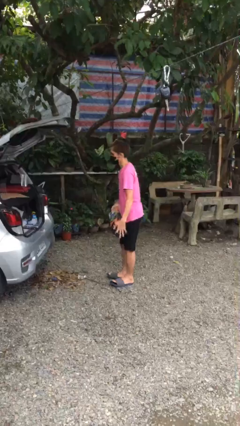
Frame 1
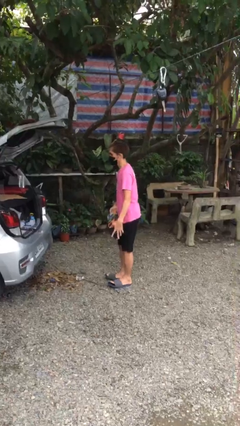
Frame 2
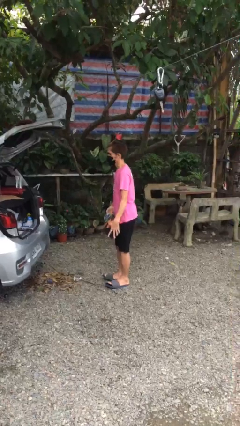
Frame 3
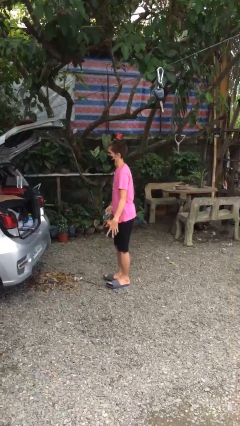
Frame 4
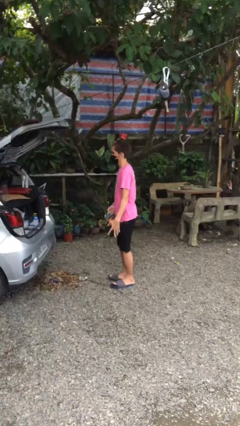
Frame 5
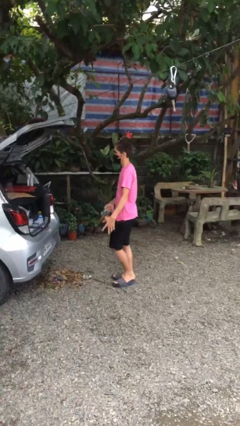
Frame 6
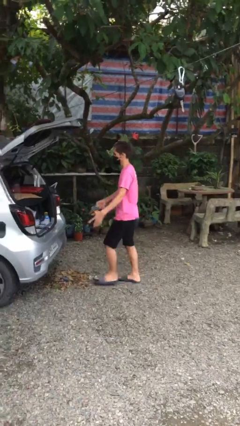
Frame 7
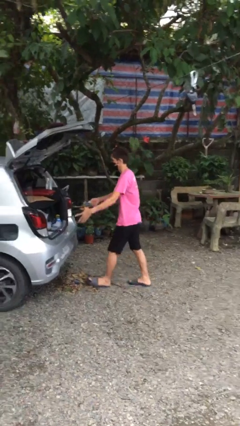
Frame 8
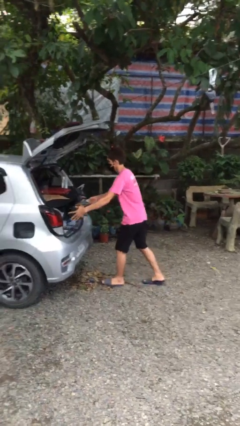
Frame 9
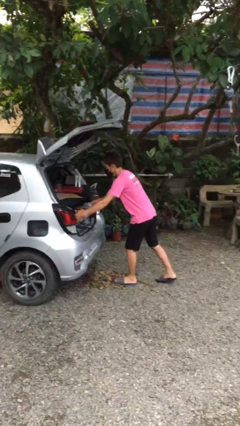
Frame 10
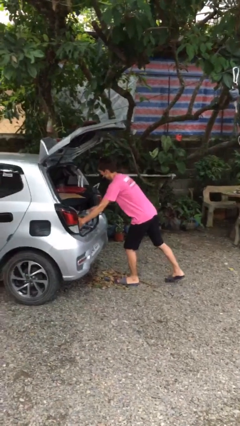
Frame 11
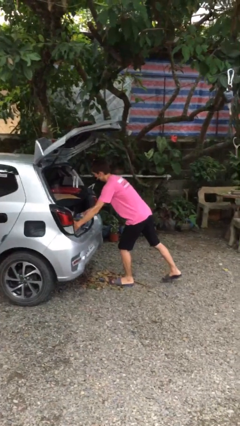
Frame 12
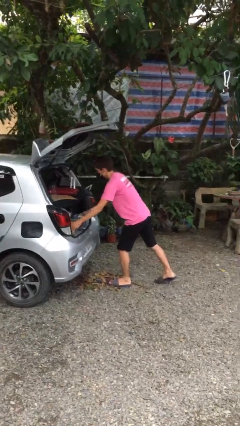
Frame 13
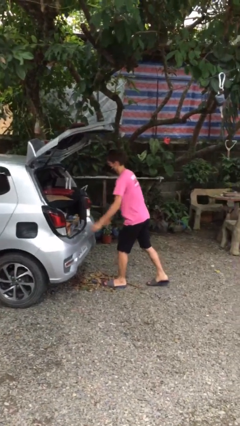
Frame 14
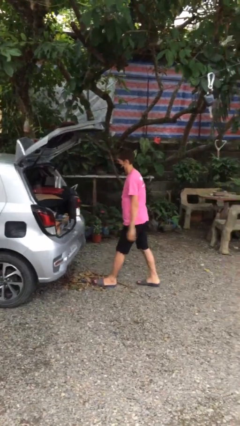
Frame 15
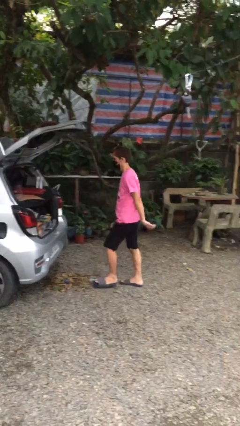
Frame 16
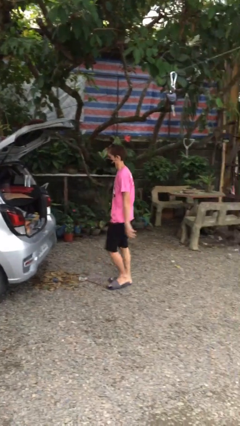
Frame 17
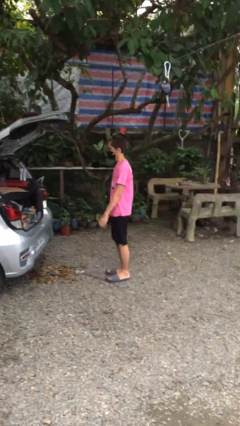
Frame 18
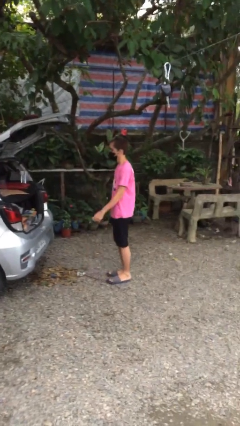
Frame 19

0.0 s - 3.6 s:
person loads car

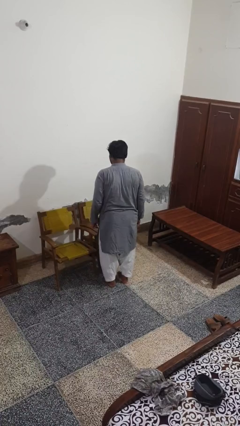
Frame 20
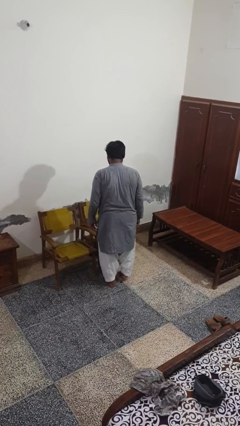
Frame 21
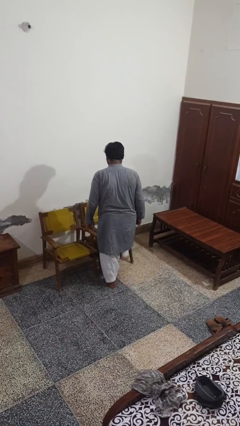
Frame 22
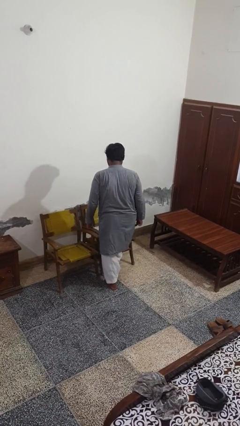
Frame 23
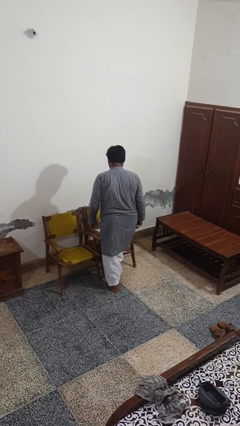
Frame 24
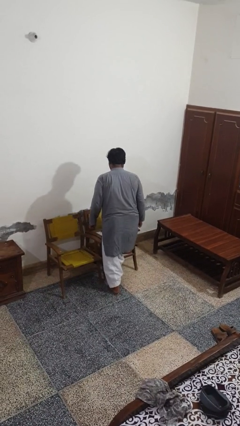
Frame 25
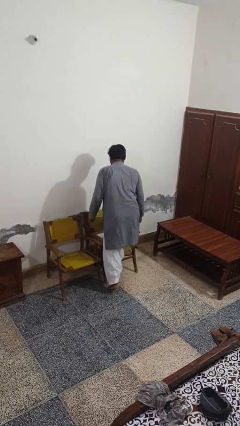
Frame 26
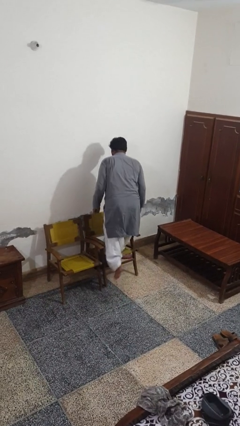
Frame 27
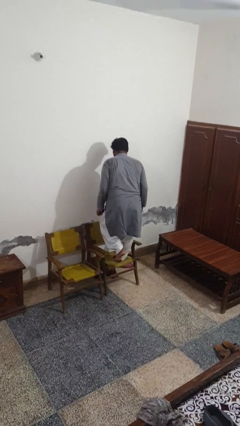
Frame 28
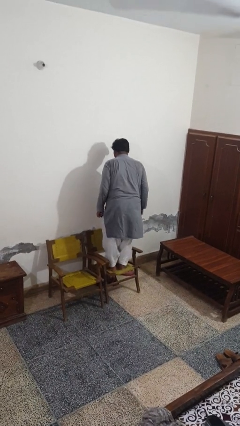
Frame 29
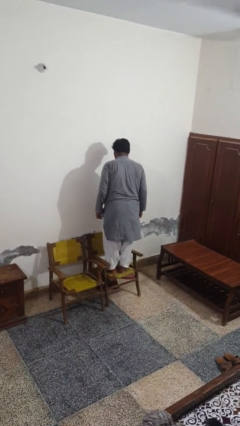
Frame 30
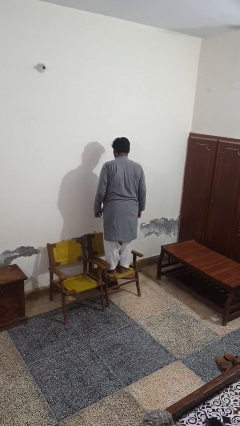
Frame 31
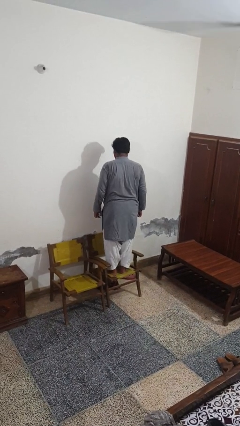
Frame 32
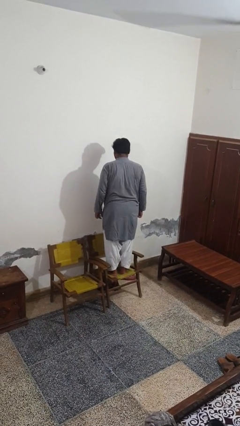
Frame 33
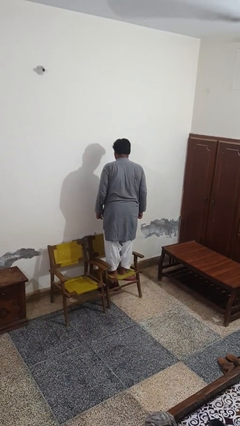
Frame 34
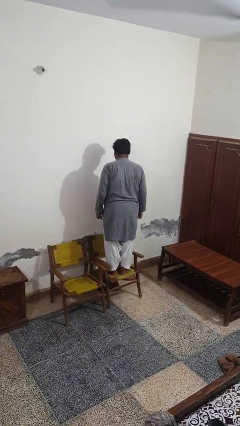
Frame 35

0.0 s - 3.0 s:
person climbs on chair

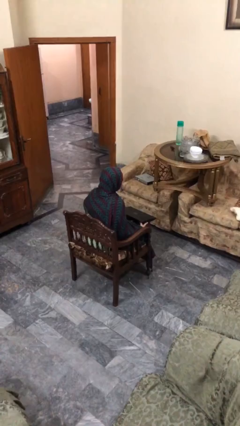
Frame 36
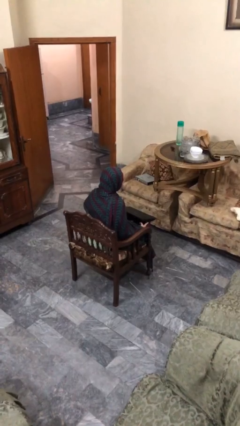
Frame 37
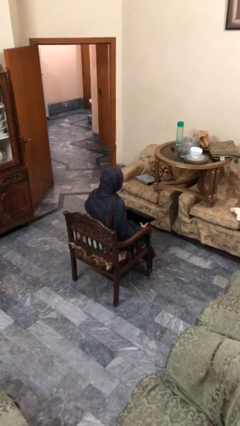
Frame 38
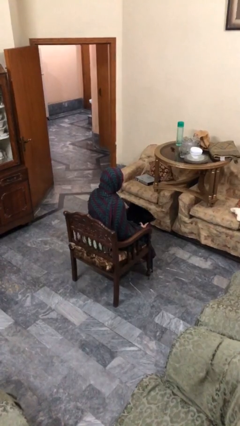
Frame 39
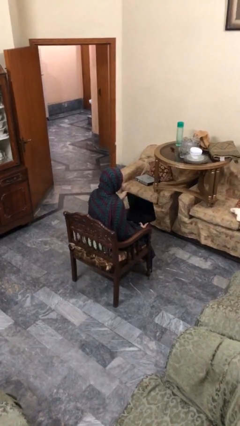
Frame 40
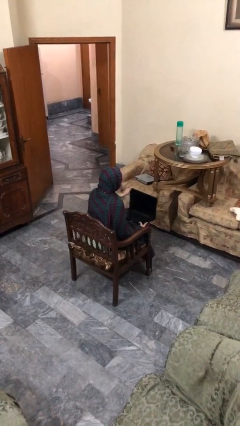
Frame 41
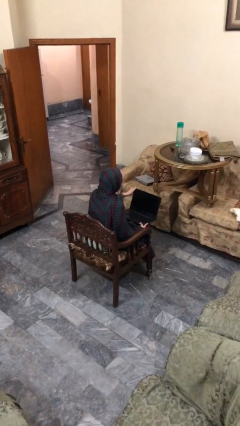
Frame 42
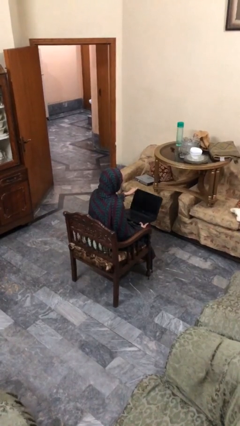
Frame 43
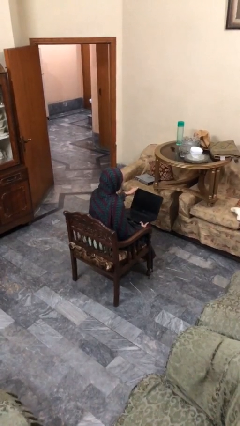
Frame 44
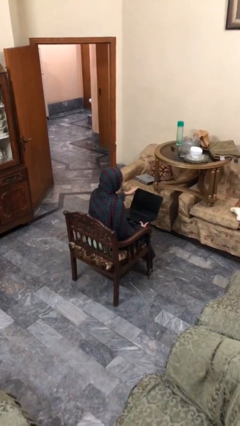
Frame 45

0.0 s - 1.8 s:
person opens laptop

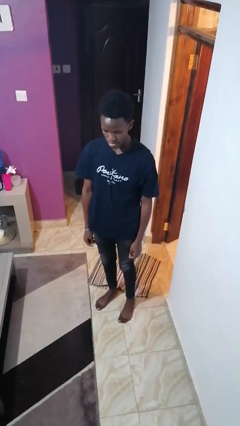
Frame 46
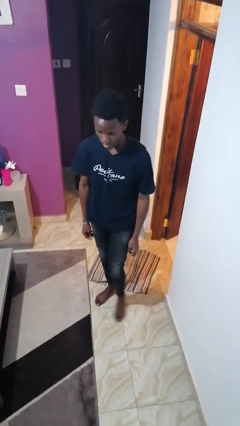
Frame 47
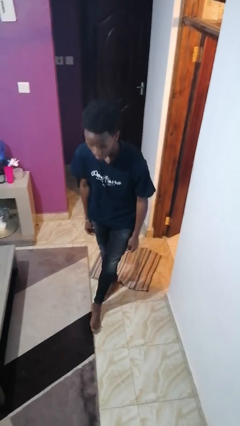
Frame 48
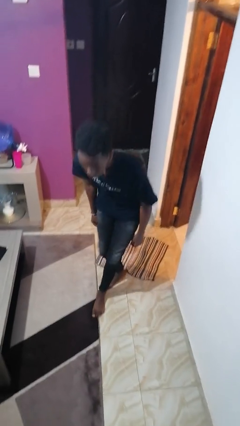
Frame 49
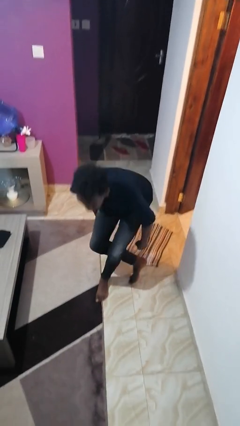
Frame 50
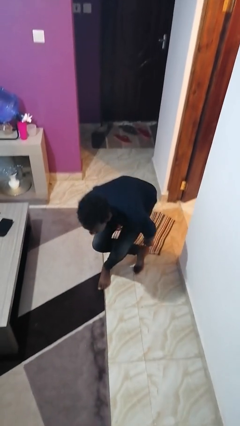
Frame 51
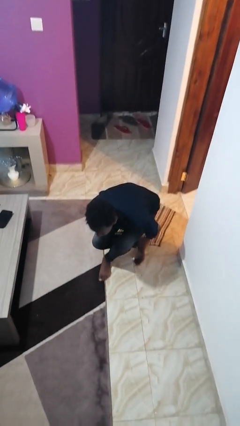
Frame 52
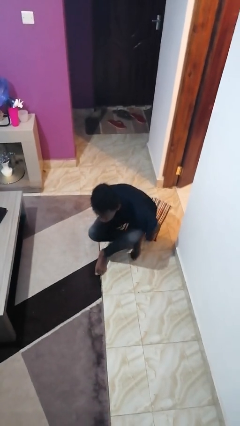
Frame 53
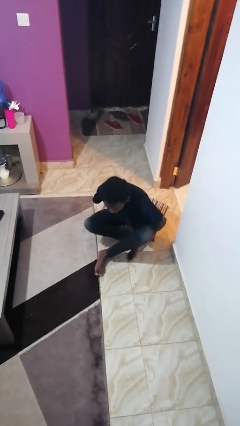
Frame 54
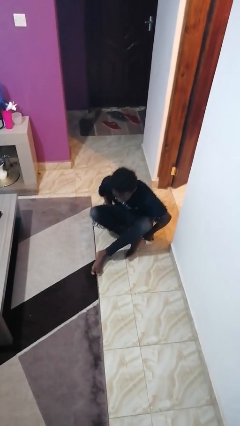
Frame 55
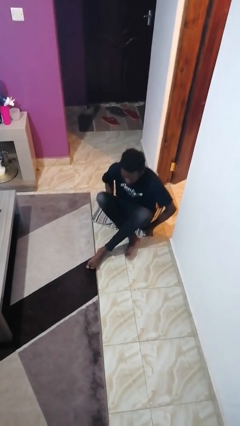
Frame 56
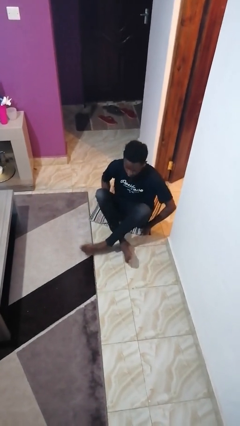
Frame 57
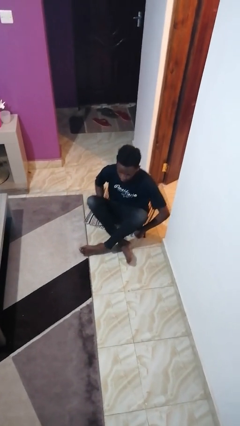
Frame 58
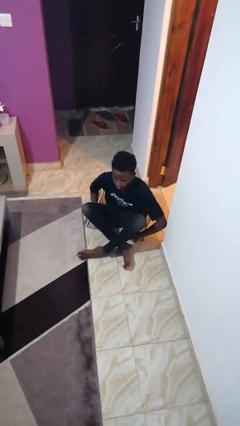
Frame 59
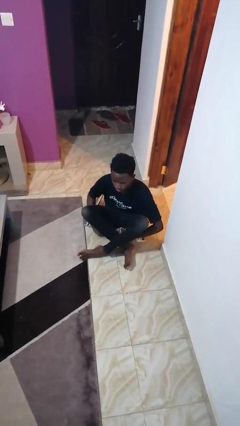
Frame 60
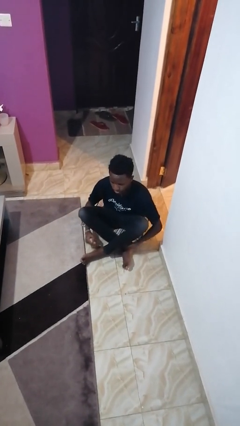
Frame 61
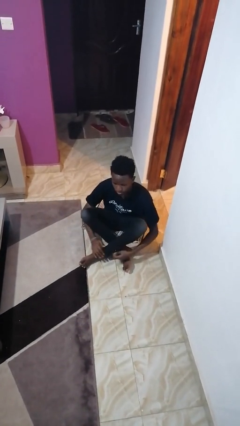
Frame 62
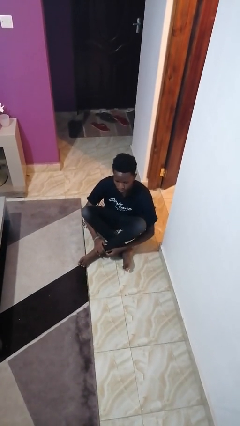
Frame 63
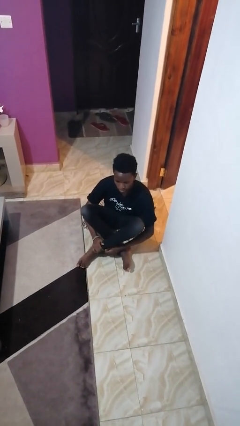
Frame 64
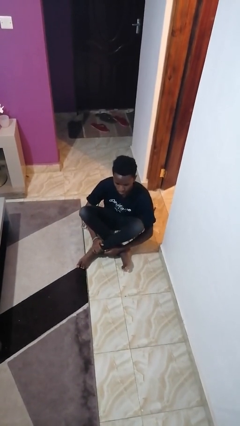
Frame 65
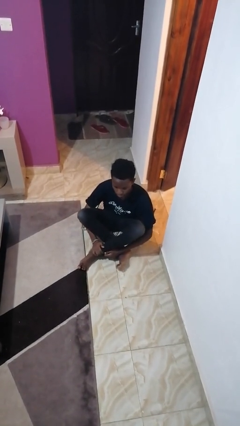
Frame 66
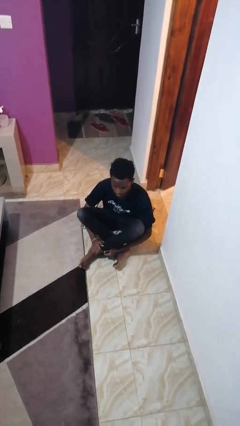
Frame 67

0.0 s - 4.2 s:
person sits crisscross

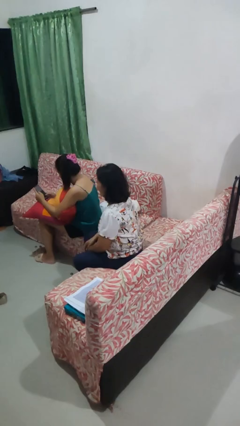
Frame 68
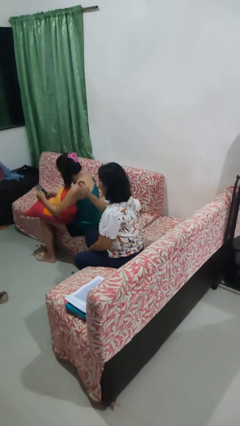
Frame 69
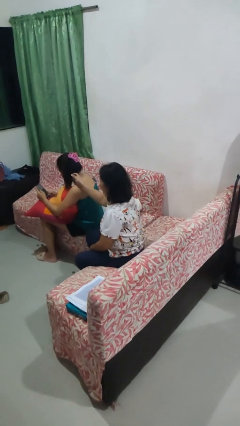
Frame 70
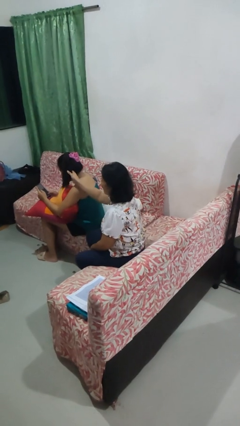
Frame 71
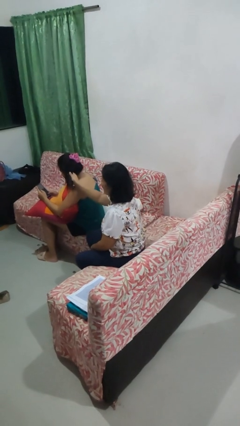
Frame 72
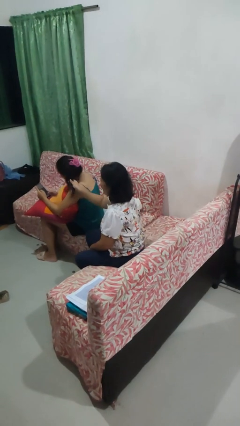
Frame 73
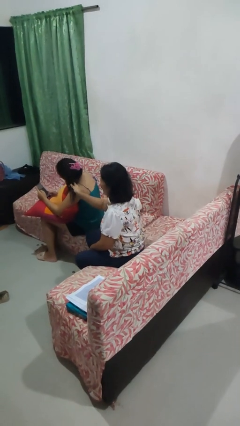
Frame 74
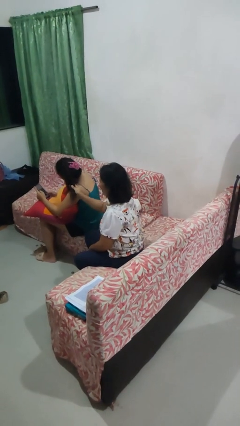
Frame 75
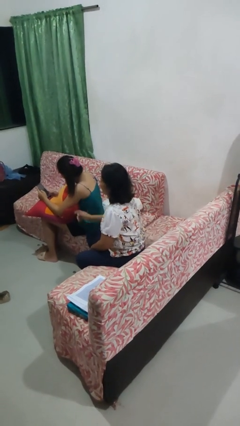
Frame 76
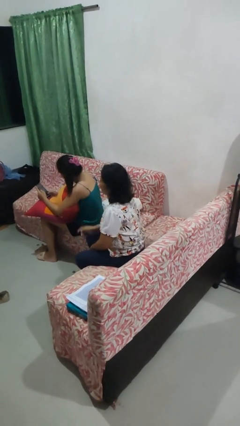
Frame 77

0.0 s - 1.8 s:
person grabs person by hair

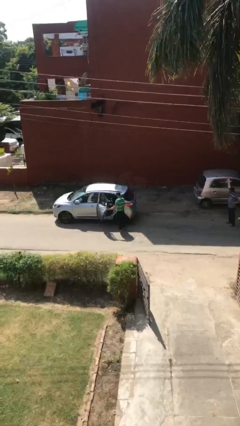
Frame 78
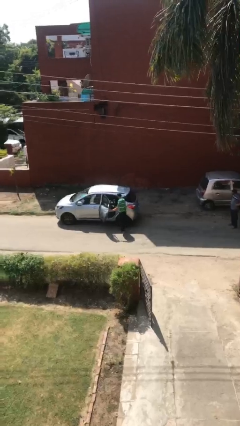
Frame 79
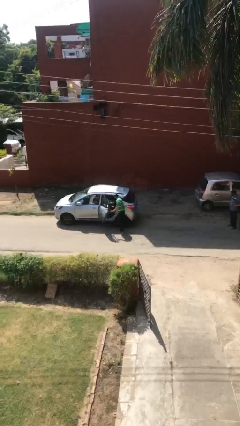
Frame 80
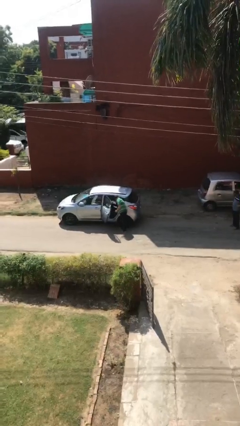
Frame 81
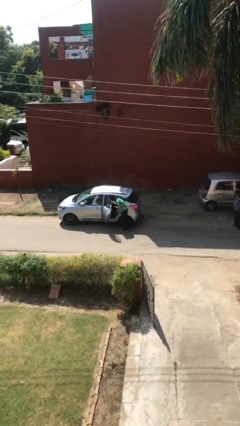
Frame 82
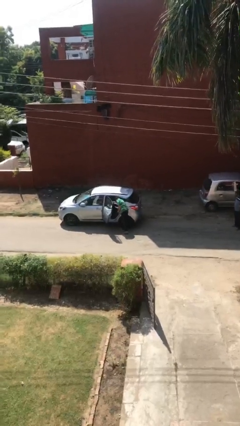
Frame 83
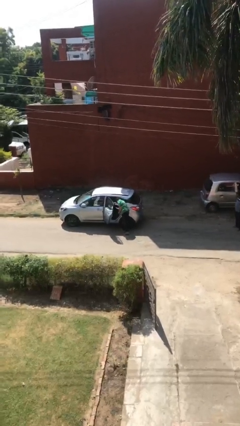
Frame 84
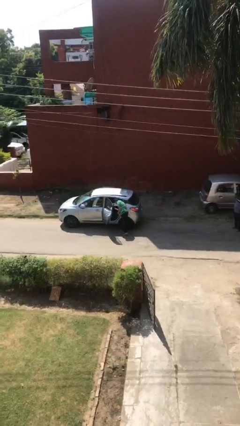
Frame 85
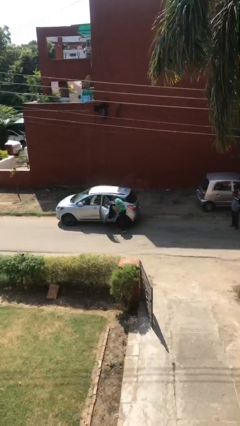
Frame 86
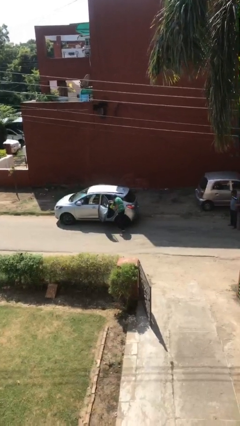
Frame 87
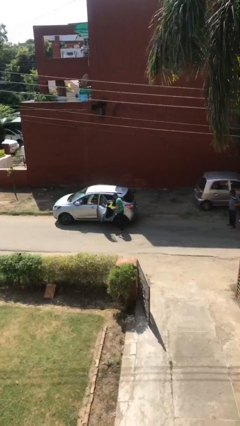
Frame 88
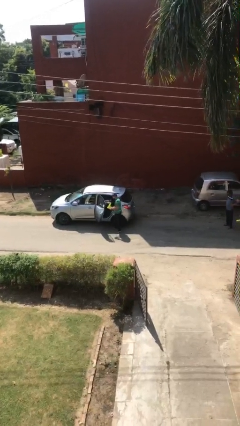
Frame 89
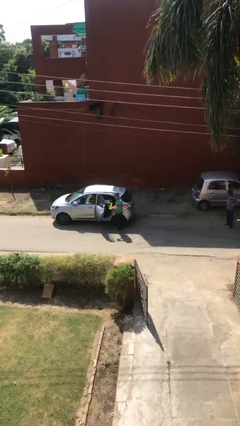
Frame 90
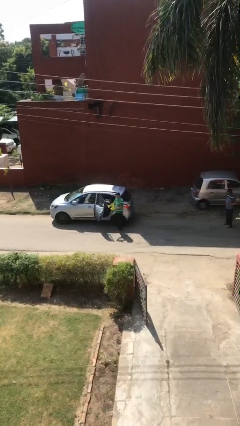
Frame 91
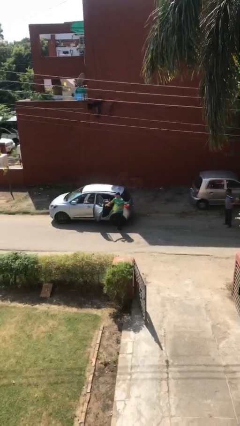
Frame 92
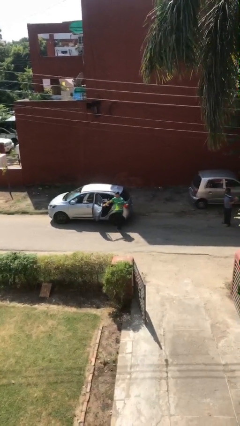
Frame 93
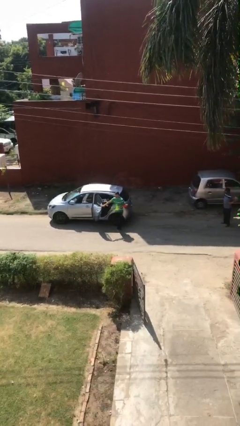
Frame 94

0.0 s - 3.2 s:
person unloads car
